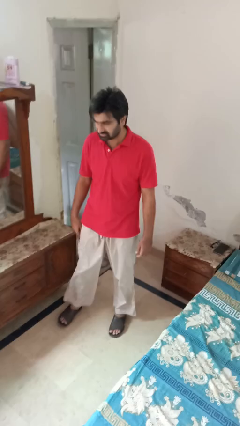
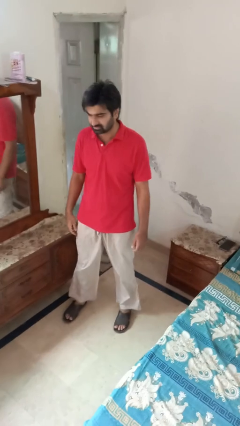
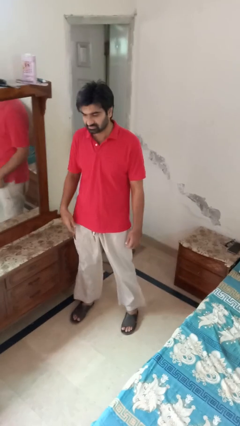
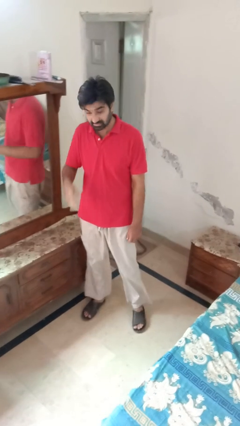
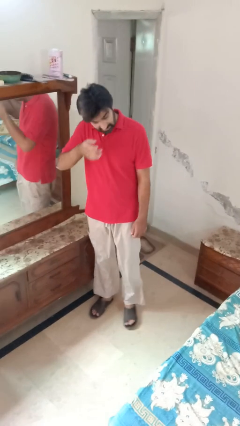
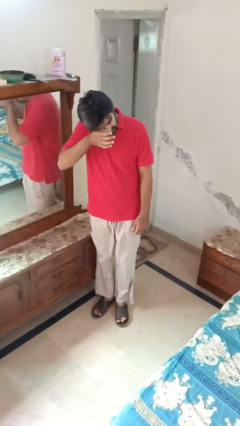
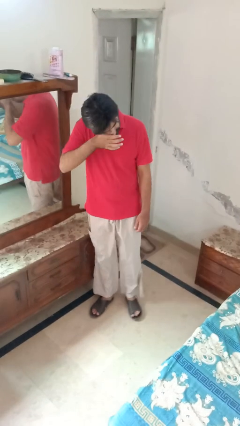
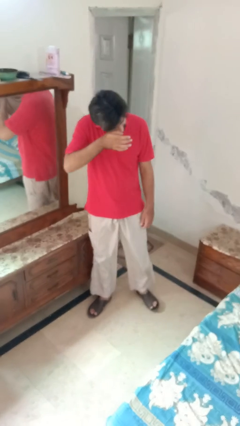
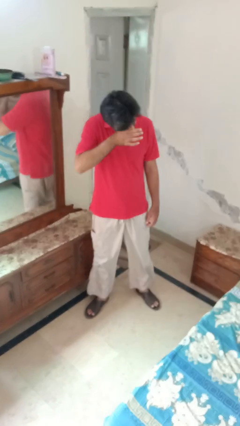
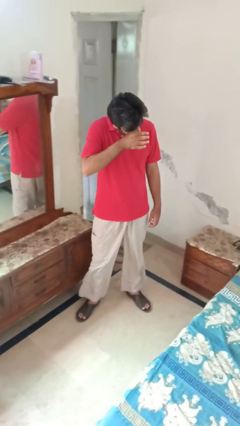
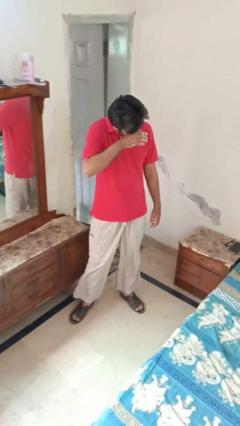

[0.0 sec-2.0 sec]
person rubs eyes

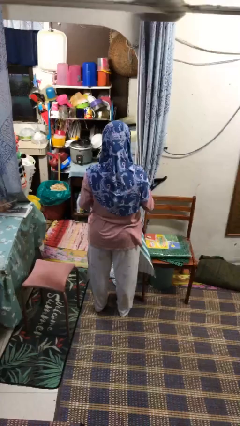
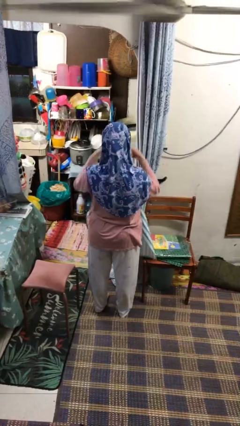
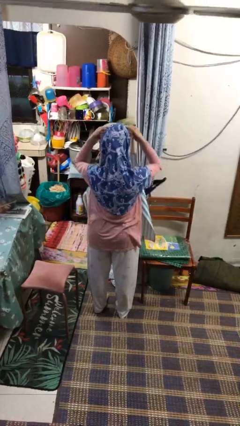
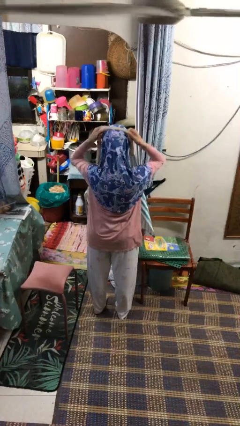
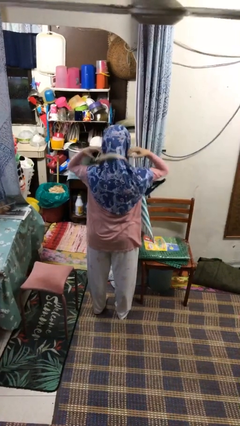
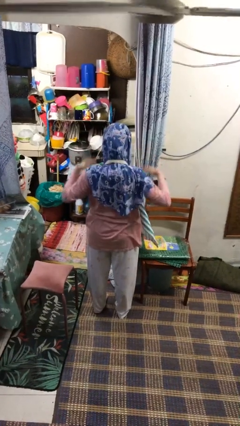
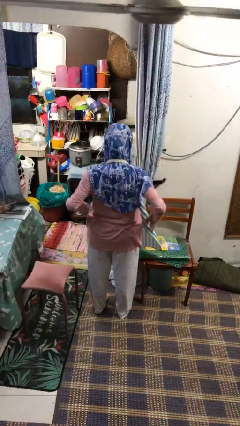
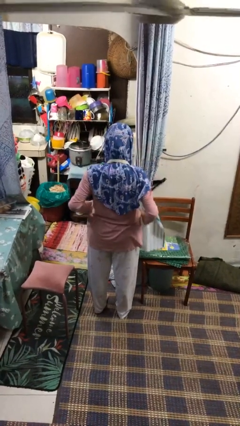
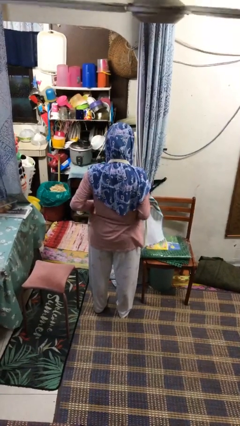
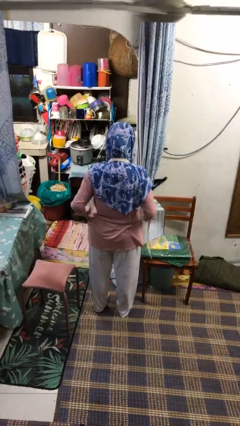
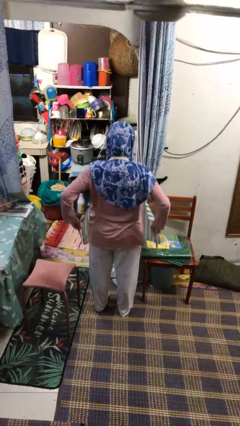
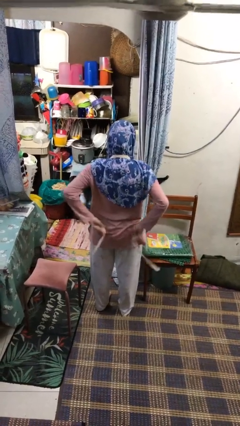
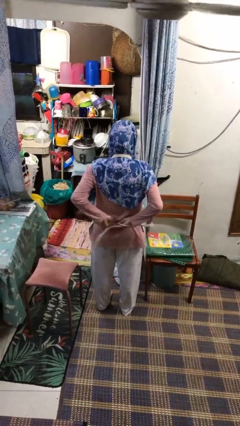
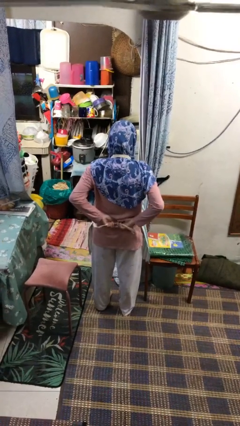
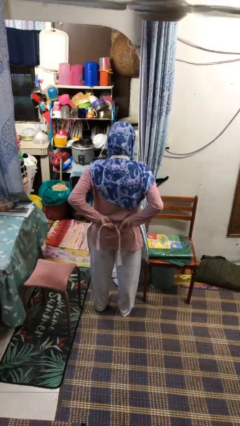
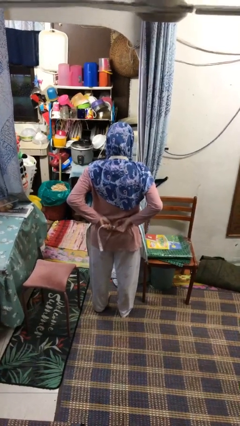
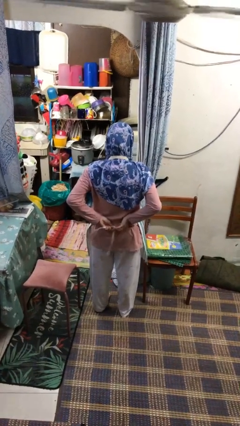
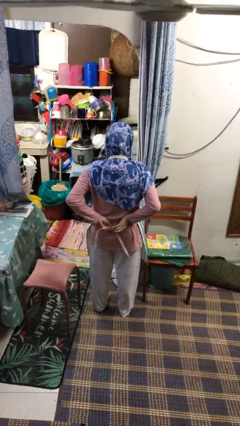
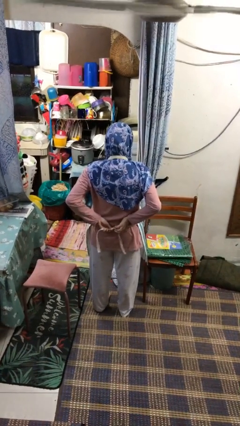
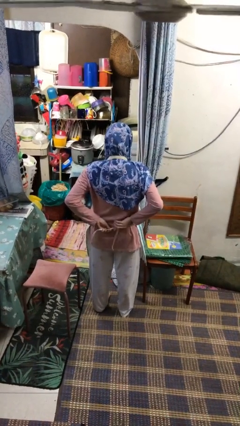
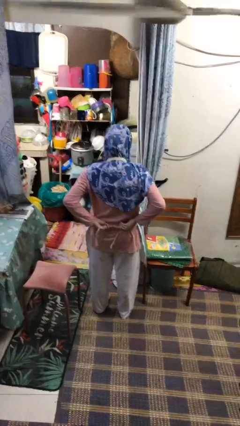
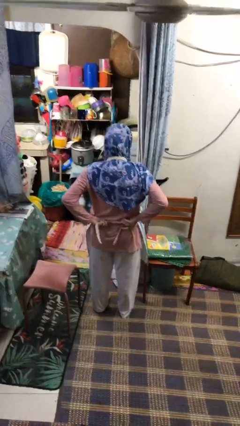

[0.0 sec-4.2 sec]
person puts on apron

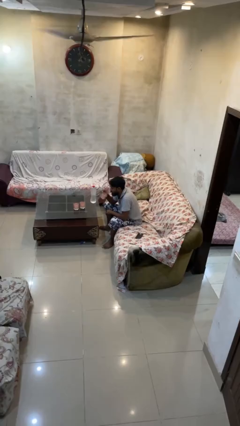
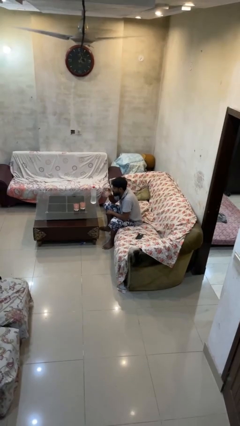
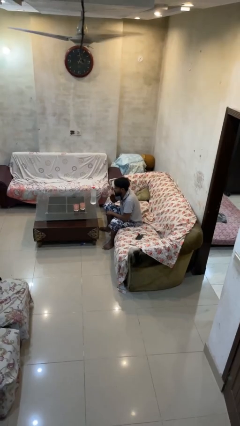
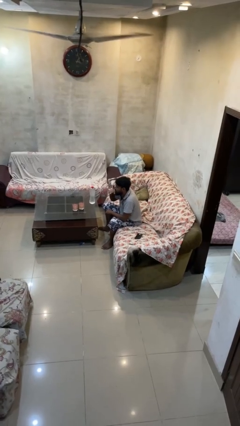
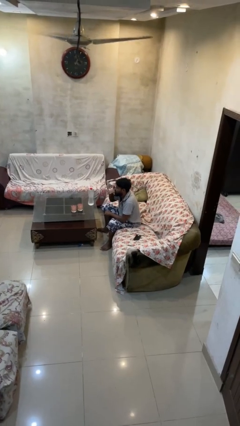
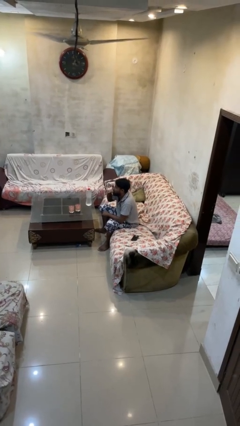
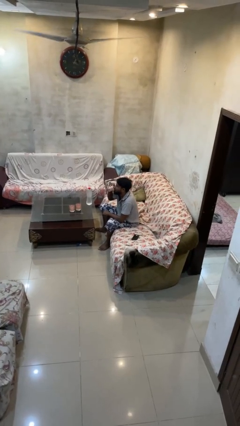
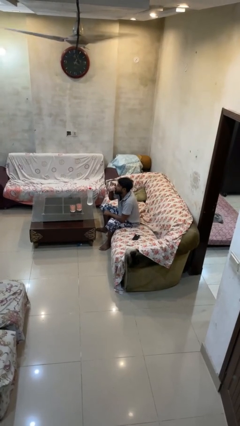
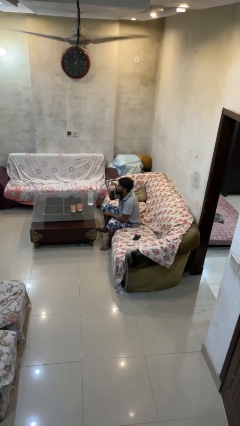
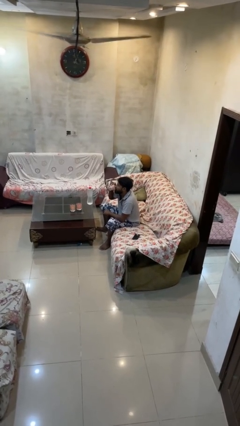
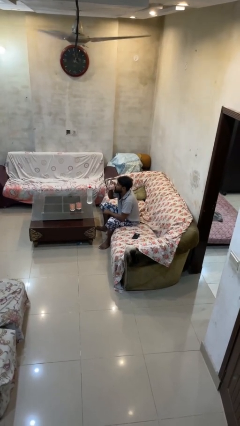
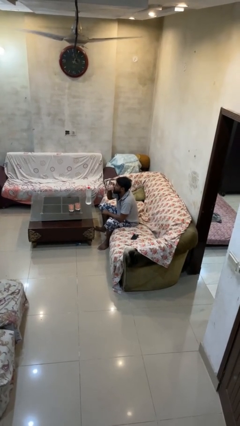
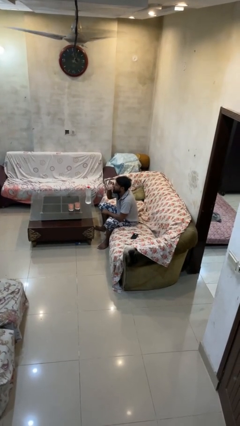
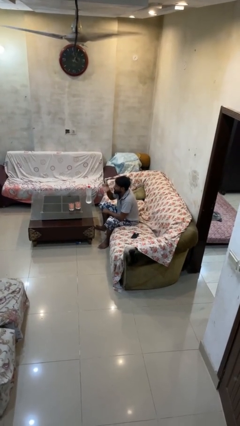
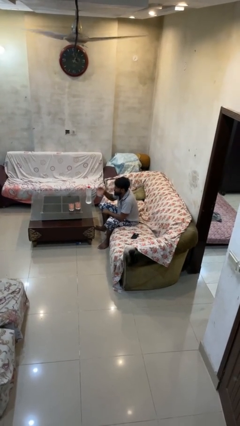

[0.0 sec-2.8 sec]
person drinks from shotglass

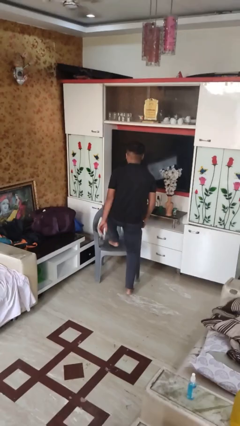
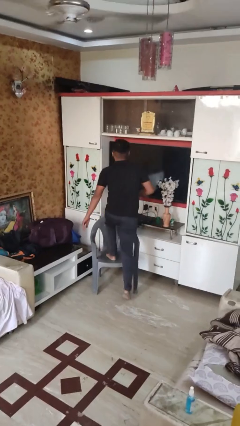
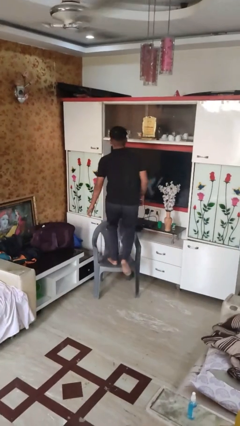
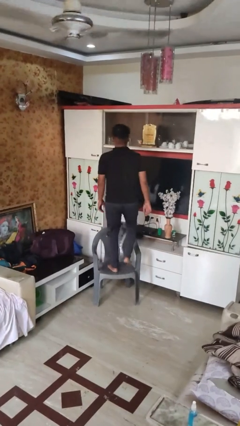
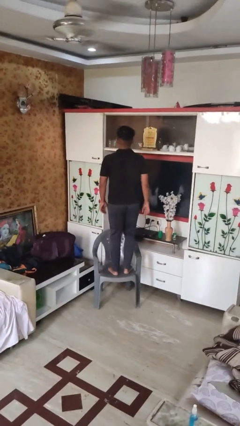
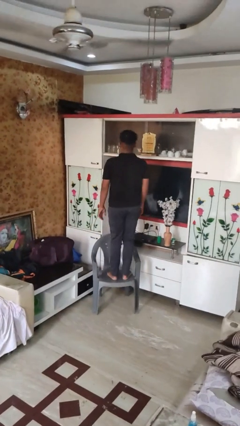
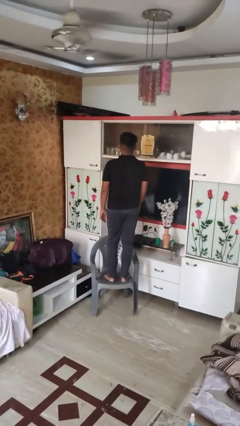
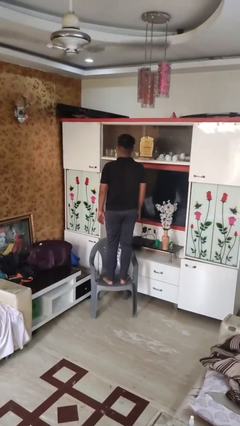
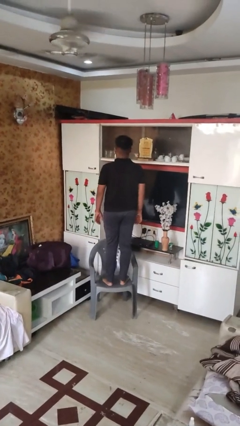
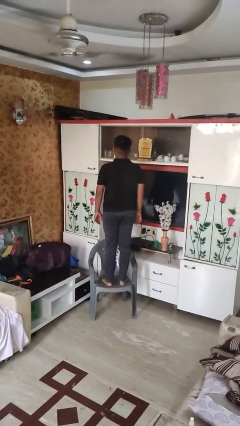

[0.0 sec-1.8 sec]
person climbs on chair

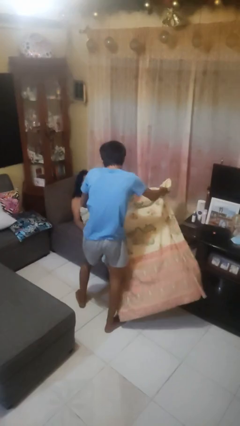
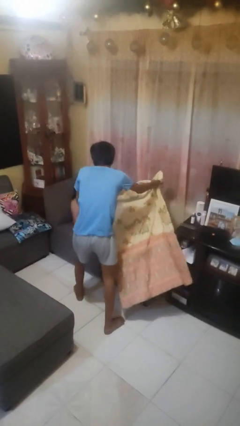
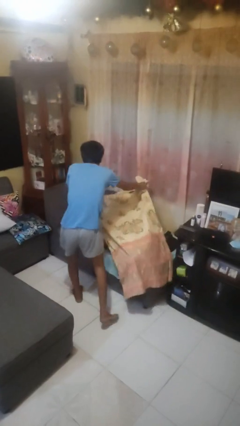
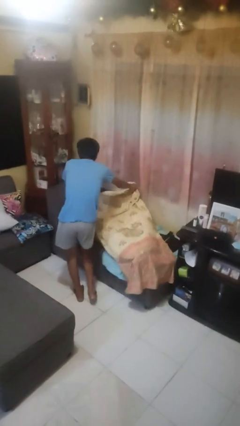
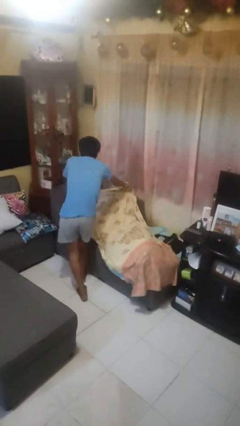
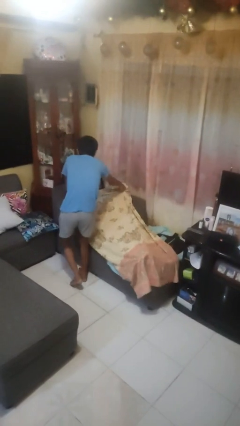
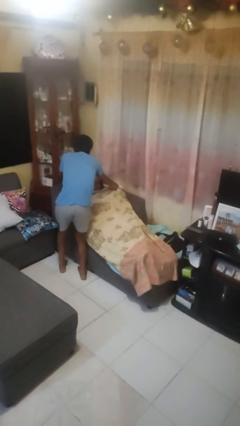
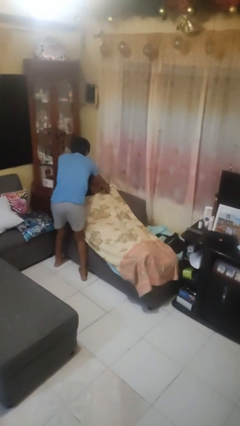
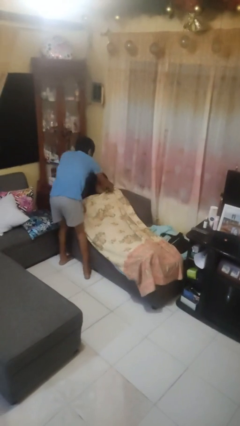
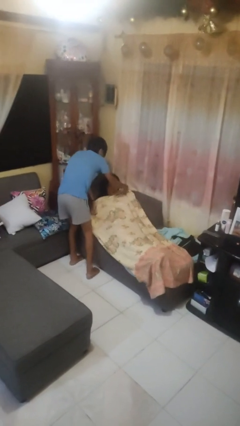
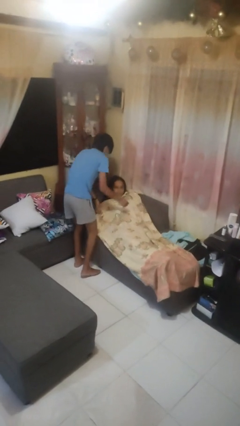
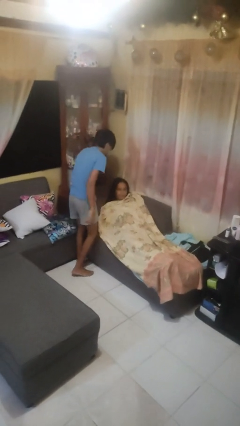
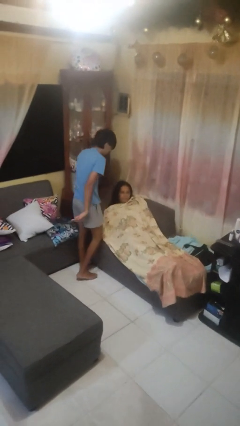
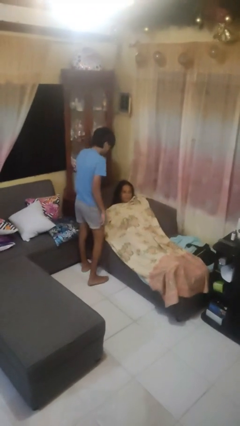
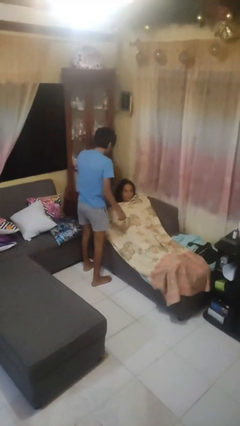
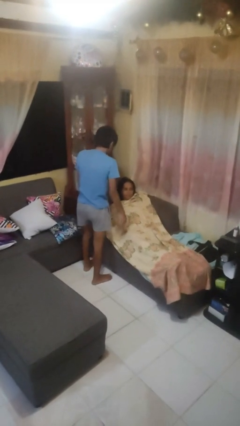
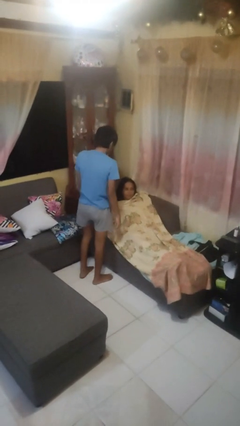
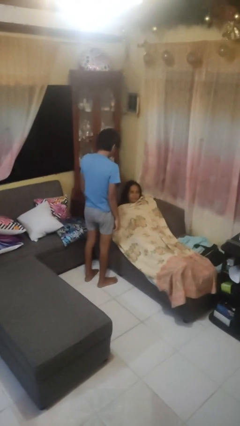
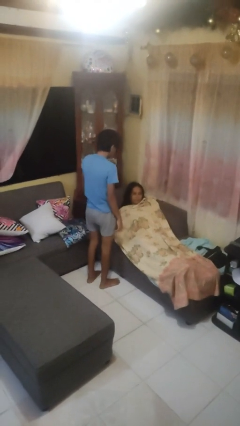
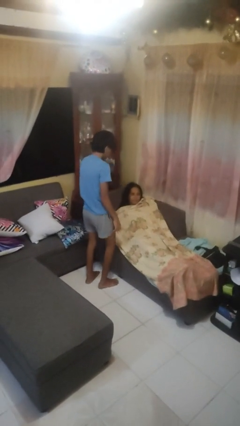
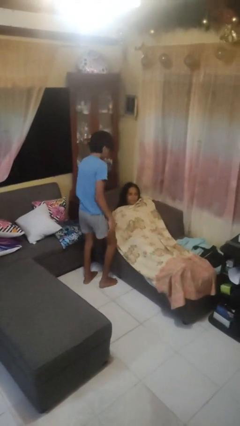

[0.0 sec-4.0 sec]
person covers friend with blanket

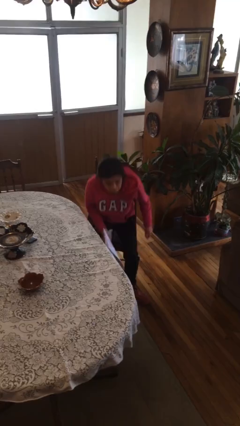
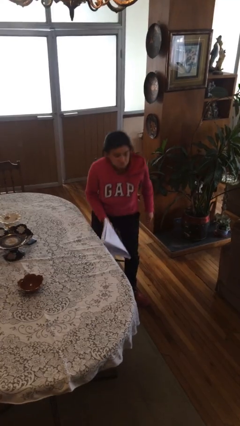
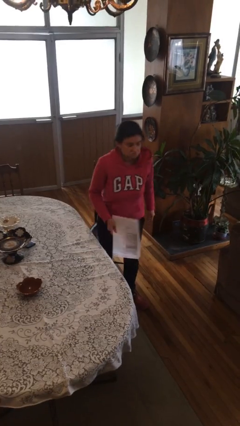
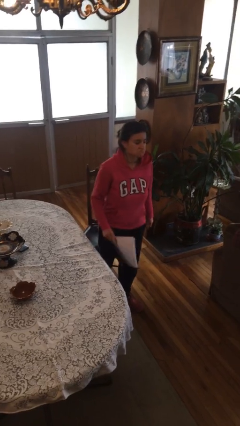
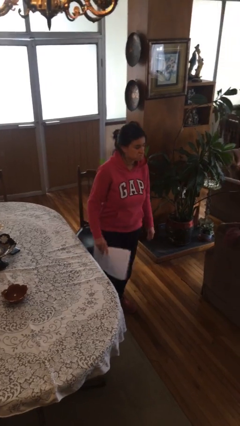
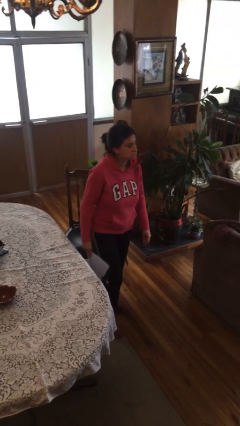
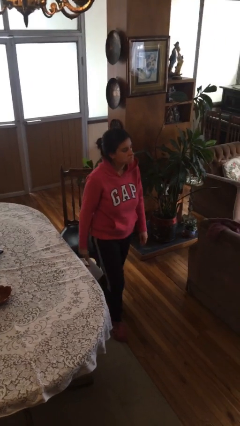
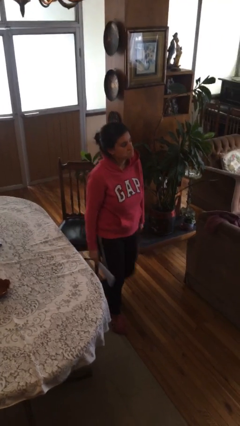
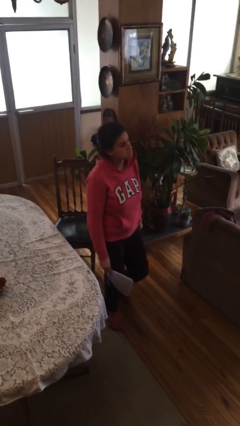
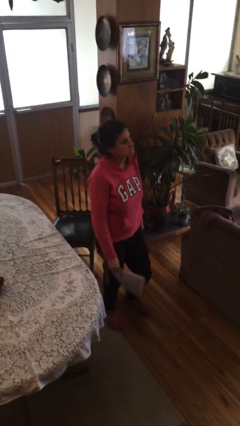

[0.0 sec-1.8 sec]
person stands up

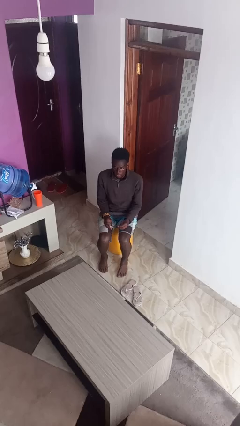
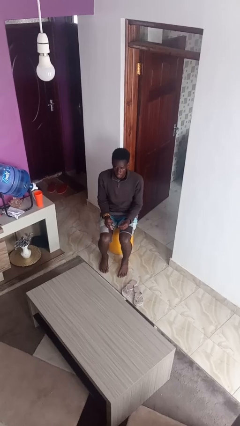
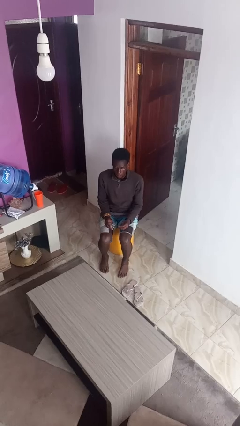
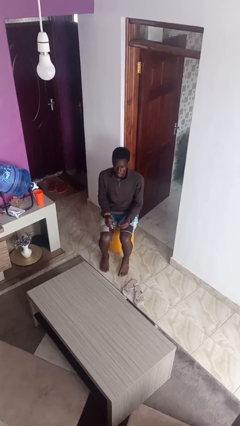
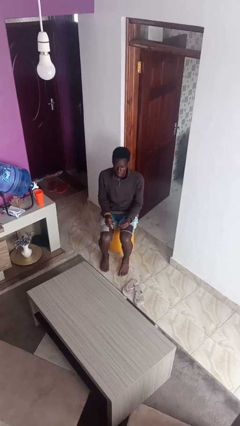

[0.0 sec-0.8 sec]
person clips fingernails
